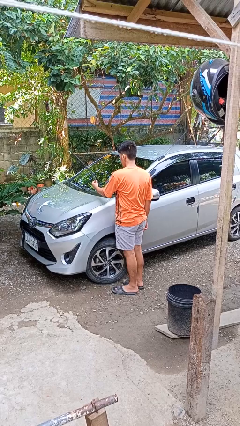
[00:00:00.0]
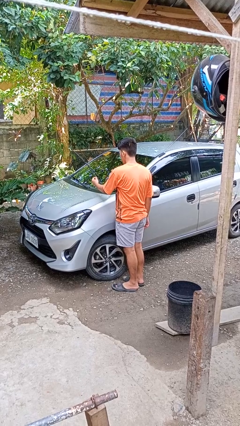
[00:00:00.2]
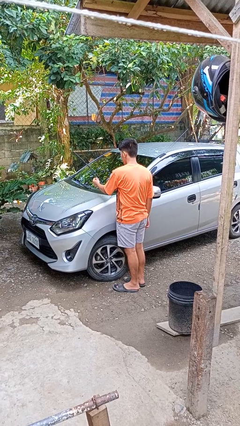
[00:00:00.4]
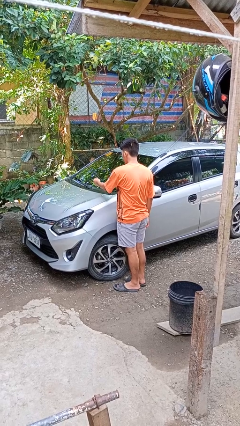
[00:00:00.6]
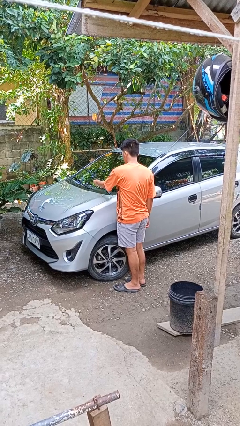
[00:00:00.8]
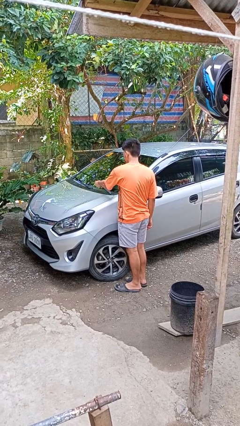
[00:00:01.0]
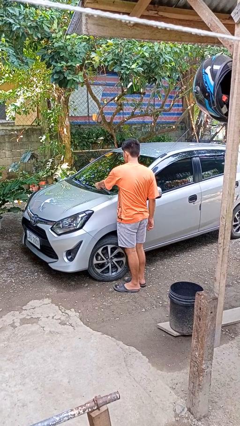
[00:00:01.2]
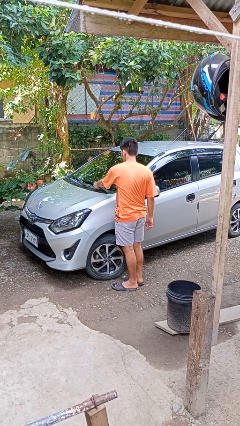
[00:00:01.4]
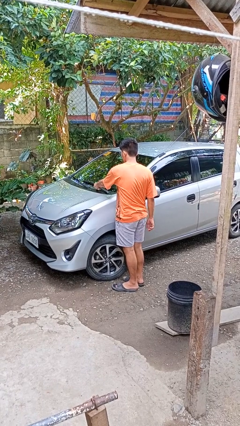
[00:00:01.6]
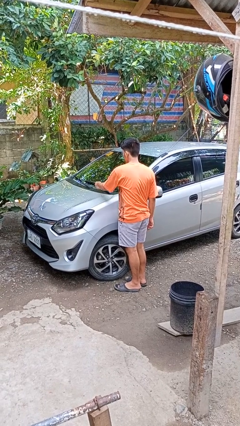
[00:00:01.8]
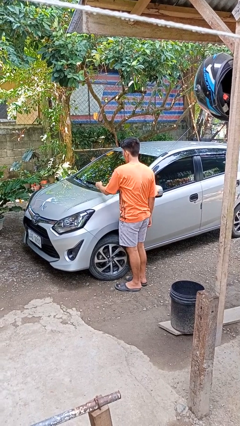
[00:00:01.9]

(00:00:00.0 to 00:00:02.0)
person flips down car wipers

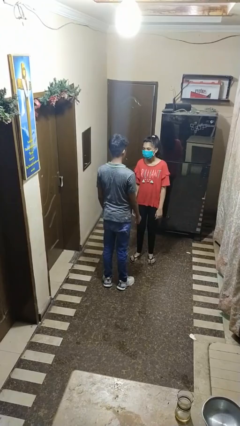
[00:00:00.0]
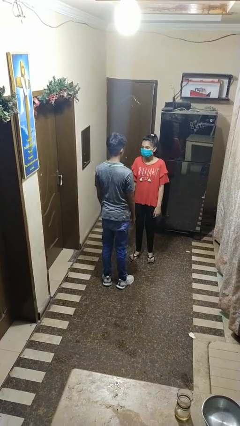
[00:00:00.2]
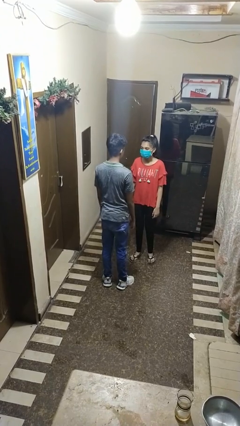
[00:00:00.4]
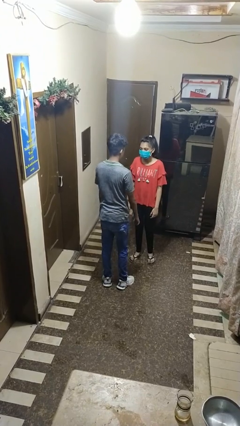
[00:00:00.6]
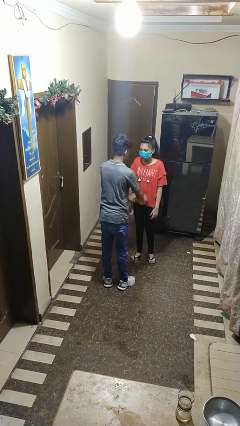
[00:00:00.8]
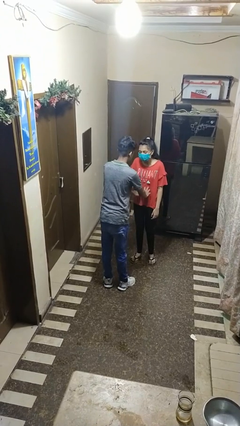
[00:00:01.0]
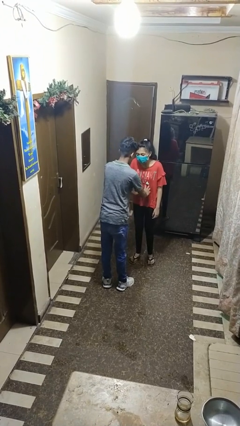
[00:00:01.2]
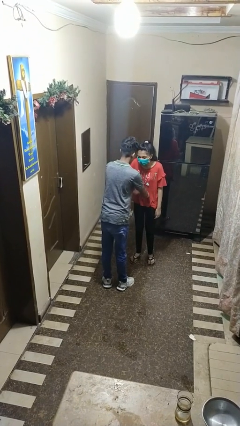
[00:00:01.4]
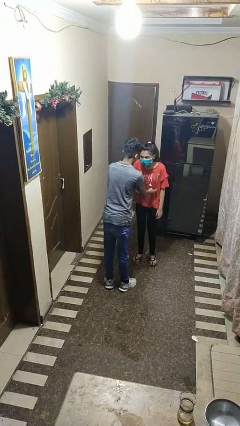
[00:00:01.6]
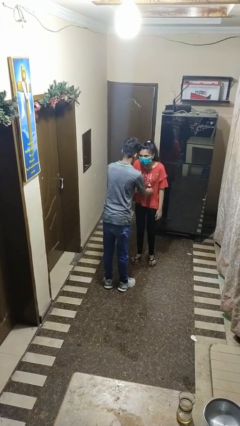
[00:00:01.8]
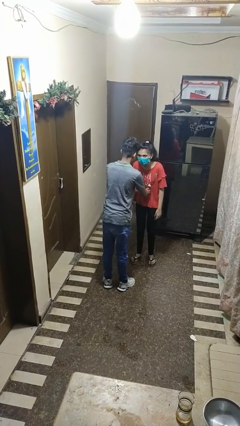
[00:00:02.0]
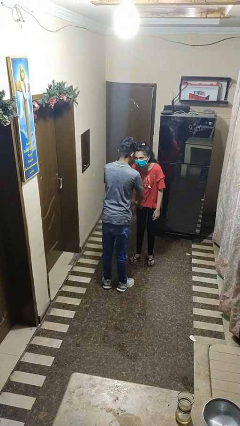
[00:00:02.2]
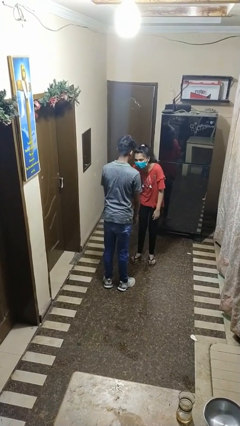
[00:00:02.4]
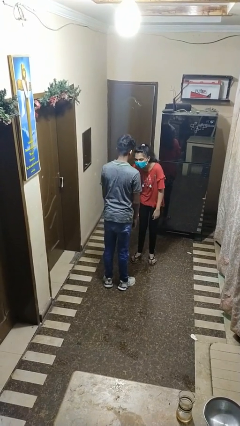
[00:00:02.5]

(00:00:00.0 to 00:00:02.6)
person tickles person

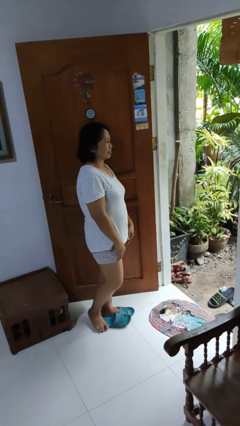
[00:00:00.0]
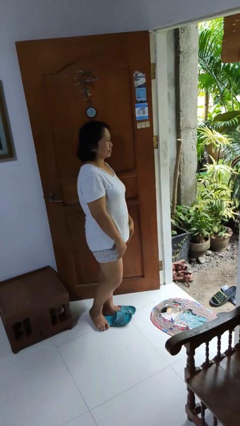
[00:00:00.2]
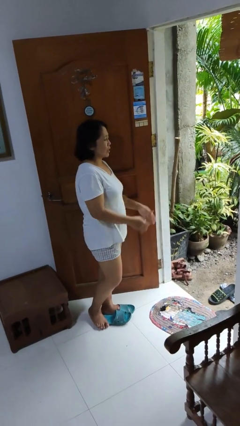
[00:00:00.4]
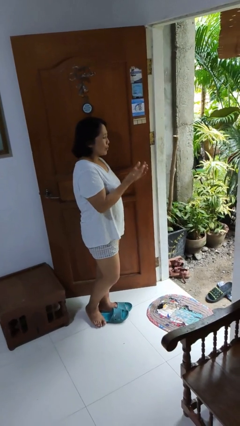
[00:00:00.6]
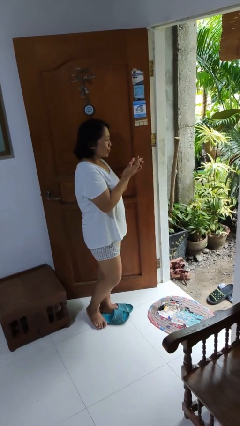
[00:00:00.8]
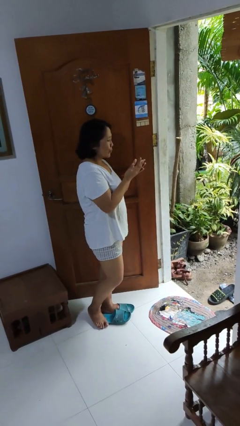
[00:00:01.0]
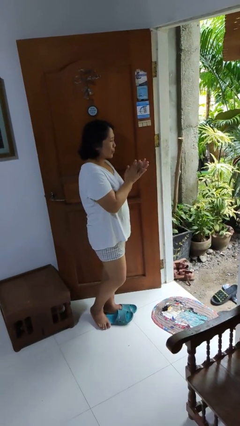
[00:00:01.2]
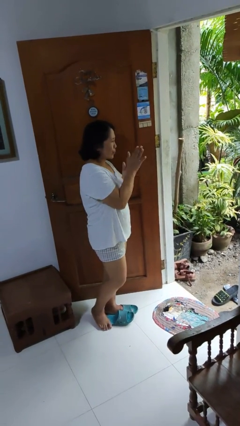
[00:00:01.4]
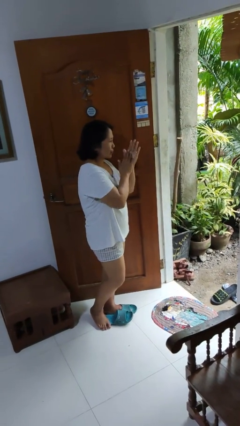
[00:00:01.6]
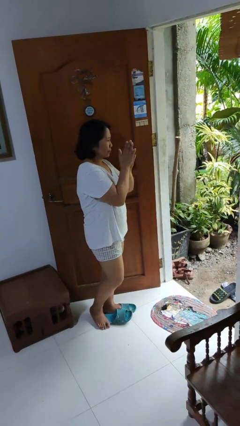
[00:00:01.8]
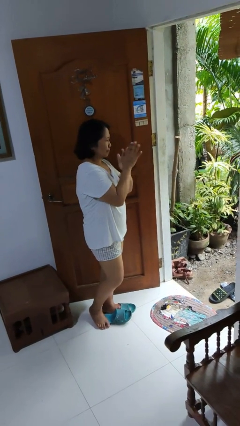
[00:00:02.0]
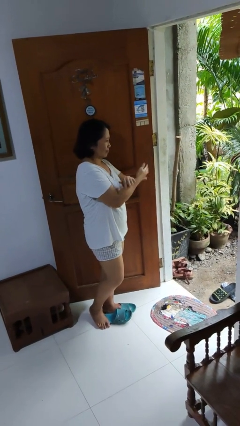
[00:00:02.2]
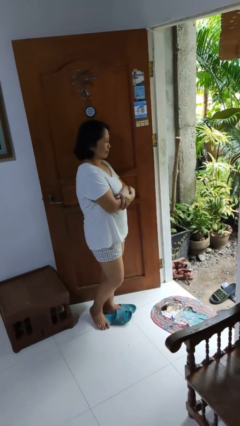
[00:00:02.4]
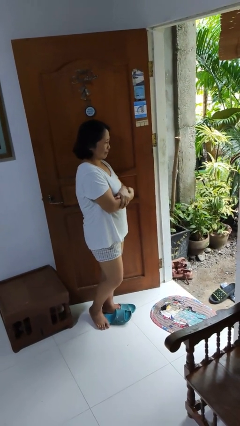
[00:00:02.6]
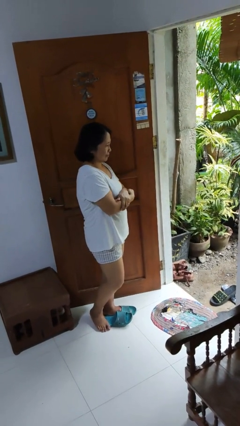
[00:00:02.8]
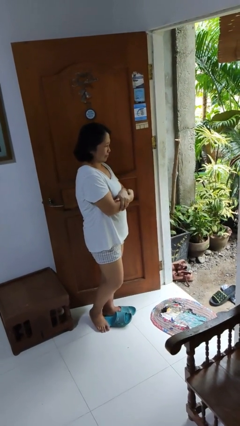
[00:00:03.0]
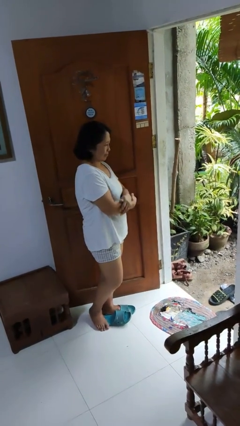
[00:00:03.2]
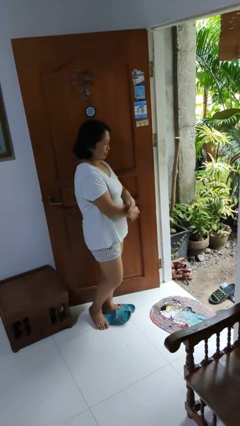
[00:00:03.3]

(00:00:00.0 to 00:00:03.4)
person blows into hands

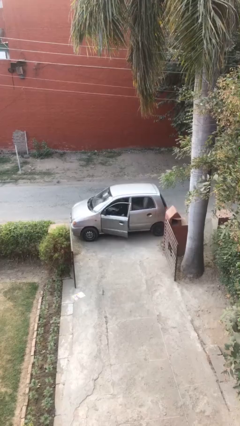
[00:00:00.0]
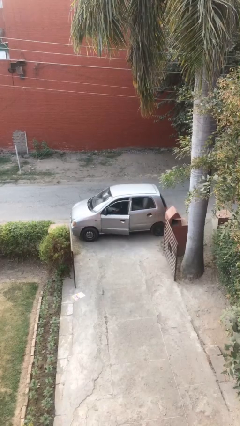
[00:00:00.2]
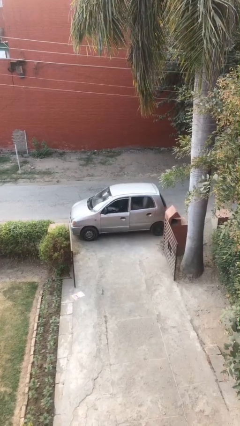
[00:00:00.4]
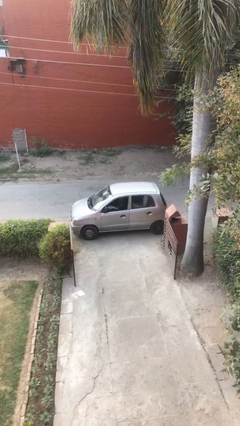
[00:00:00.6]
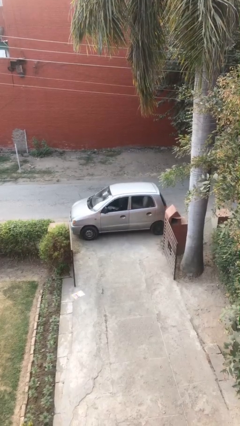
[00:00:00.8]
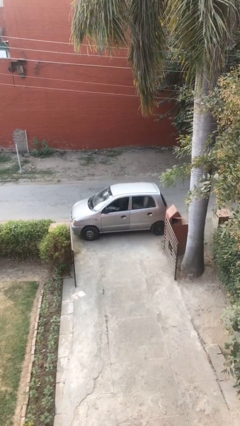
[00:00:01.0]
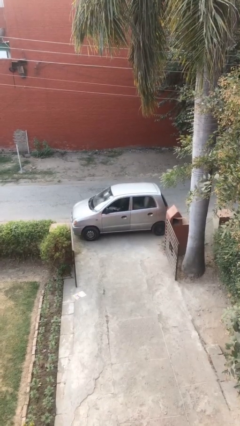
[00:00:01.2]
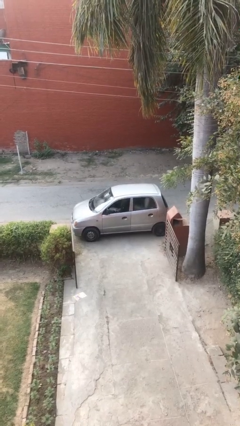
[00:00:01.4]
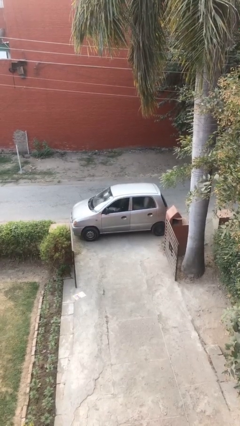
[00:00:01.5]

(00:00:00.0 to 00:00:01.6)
person closes car door

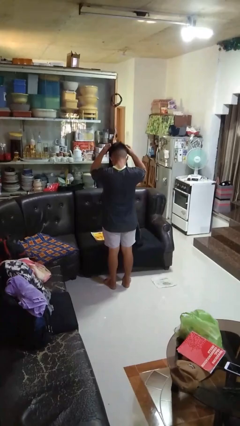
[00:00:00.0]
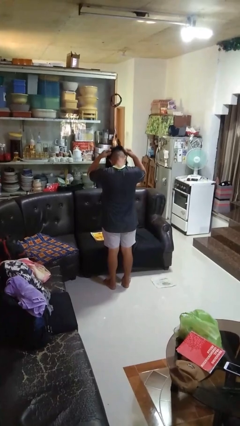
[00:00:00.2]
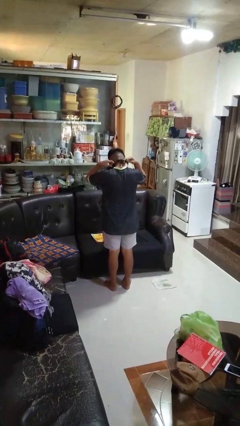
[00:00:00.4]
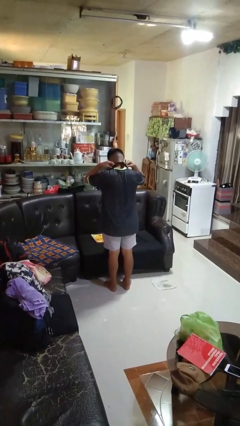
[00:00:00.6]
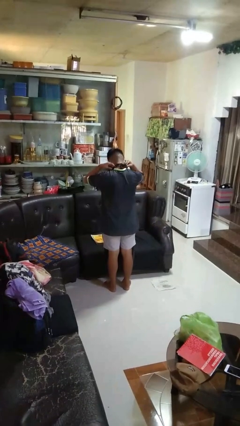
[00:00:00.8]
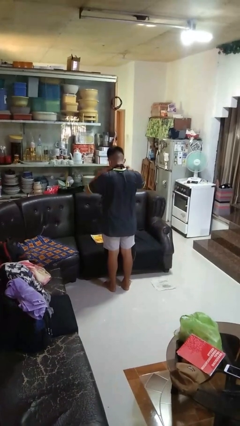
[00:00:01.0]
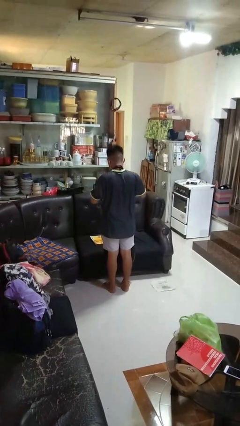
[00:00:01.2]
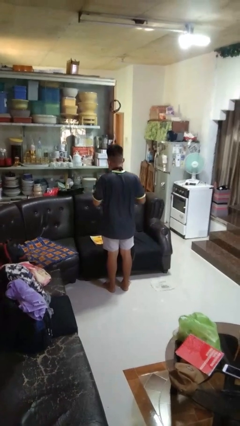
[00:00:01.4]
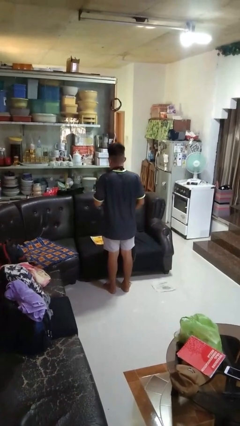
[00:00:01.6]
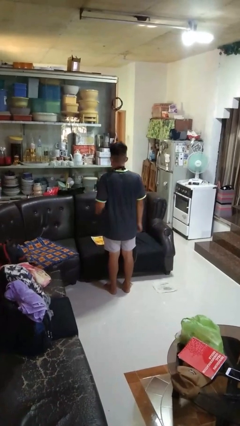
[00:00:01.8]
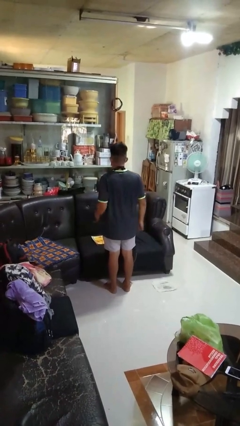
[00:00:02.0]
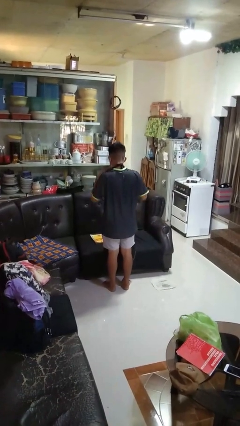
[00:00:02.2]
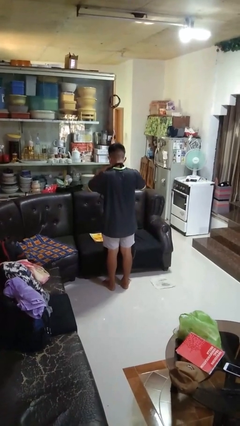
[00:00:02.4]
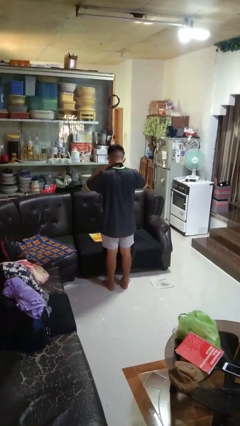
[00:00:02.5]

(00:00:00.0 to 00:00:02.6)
person puts on apron

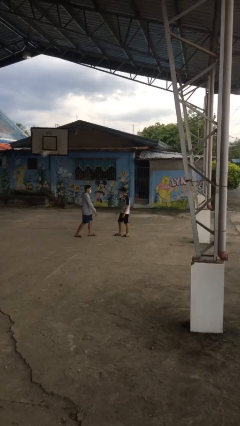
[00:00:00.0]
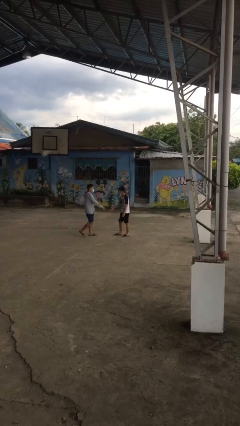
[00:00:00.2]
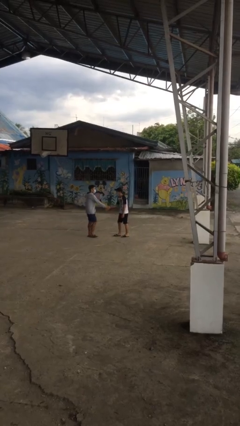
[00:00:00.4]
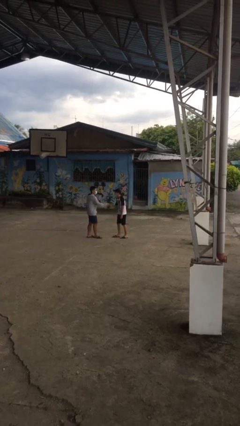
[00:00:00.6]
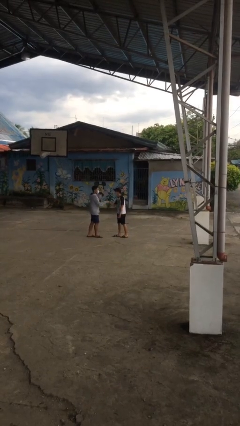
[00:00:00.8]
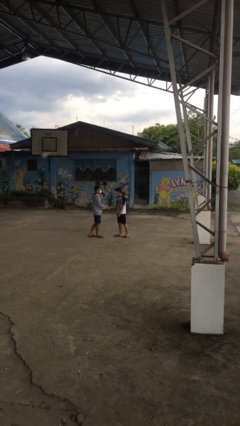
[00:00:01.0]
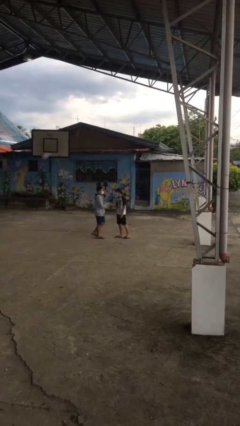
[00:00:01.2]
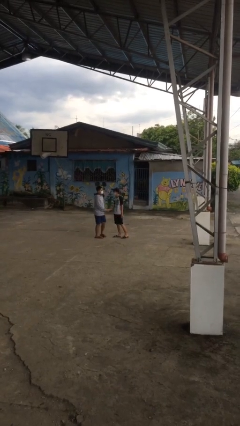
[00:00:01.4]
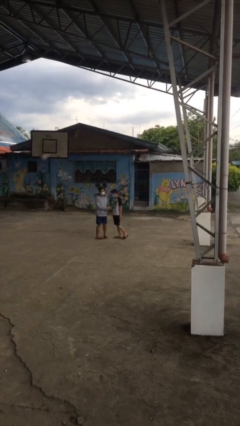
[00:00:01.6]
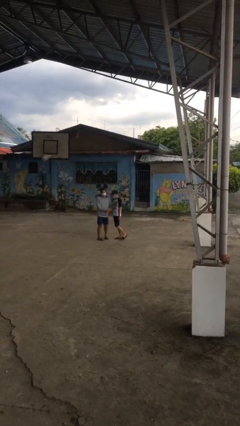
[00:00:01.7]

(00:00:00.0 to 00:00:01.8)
person shakes hand

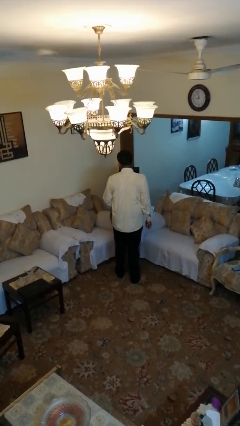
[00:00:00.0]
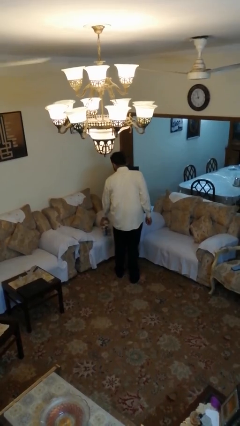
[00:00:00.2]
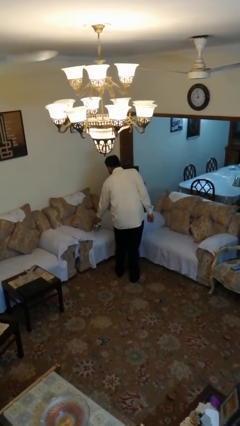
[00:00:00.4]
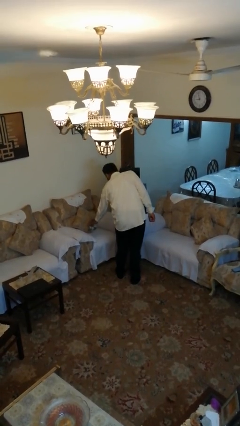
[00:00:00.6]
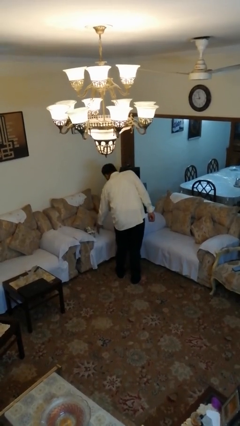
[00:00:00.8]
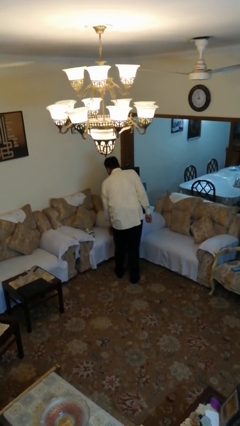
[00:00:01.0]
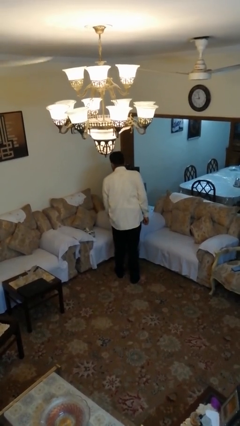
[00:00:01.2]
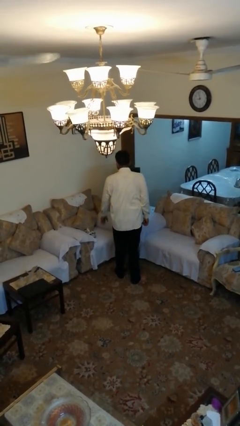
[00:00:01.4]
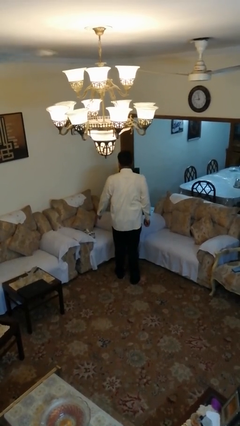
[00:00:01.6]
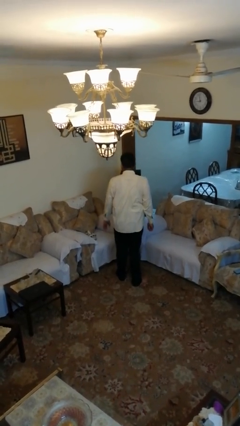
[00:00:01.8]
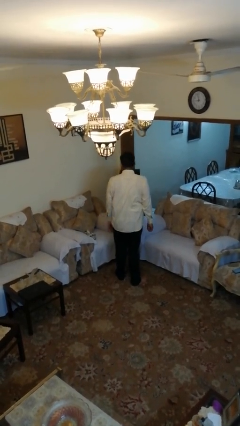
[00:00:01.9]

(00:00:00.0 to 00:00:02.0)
person puts down object on couch

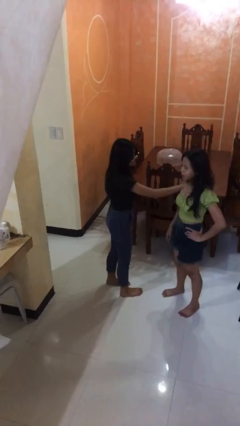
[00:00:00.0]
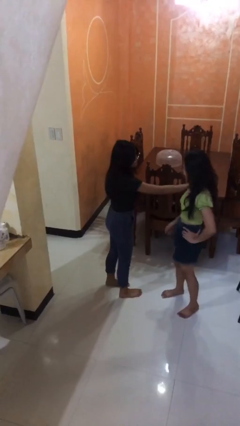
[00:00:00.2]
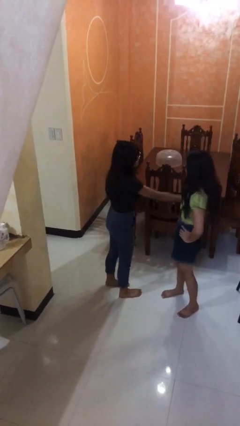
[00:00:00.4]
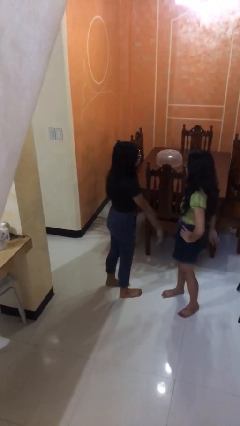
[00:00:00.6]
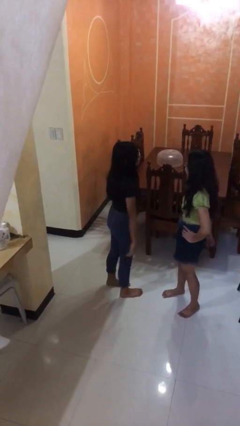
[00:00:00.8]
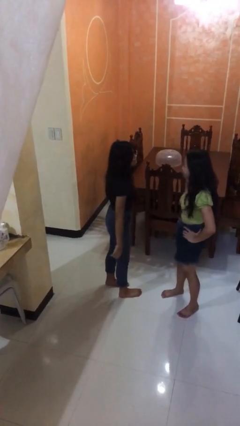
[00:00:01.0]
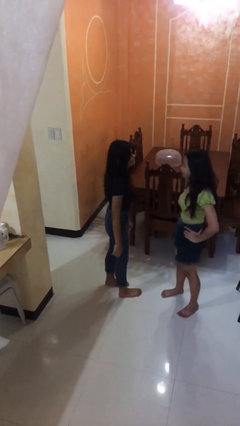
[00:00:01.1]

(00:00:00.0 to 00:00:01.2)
person shoves person
